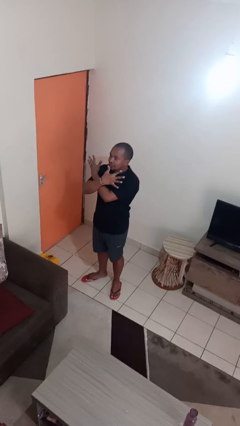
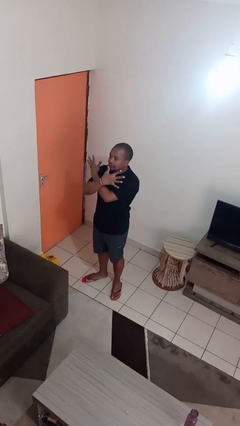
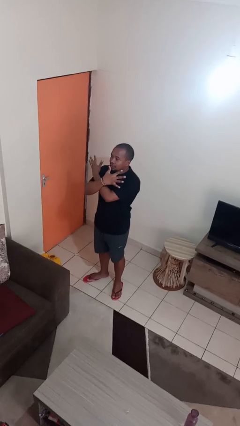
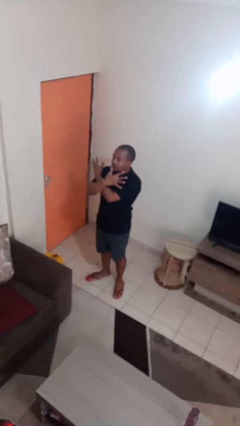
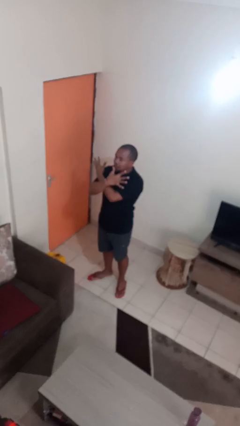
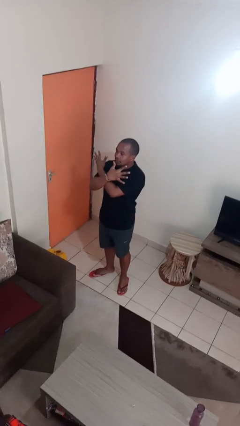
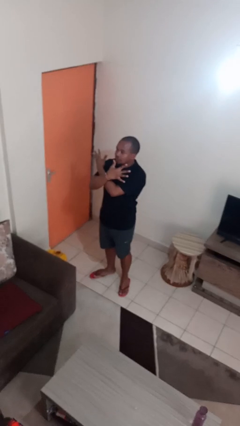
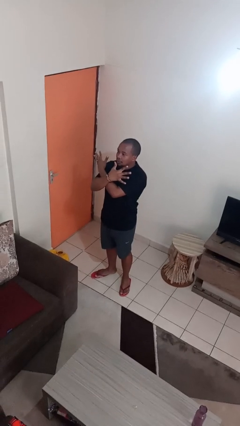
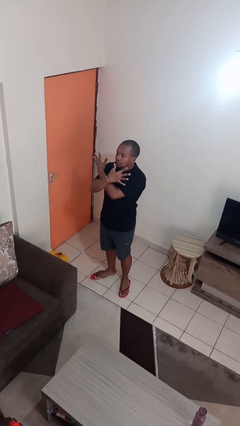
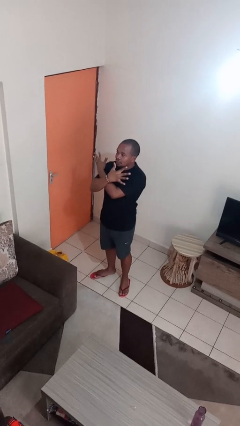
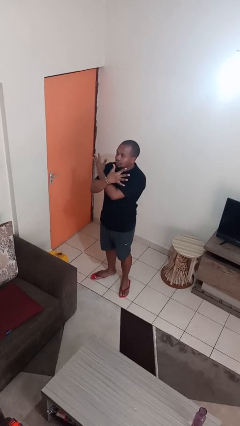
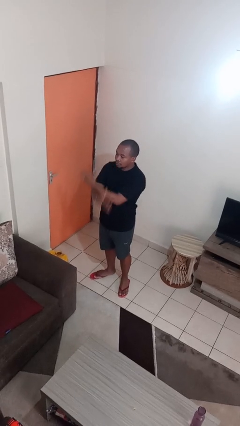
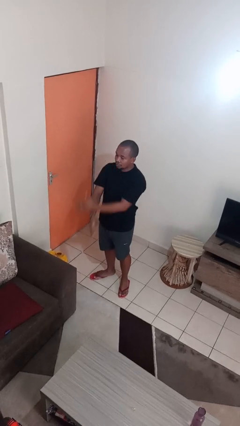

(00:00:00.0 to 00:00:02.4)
person gestures arms x

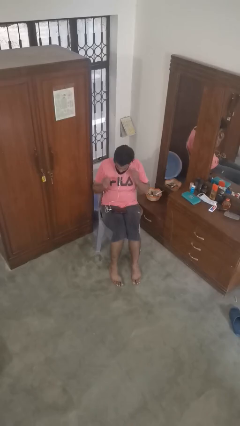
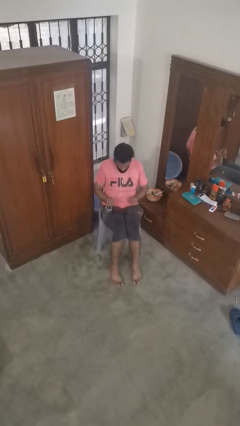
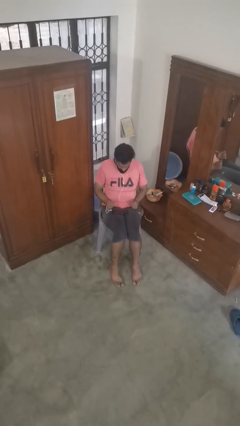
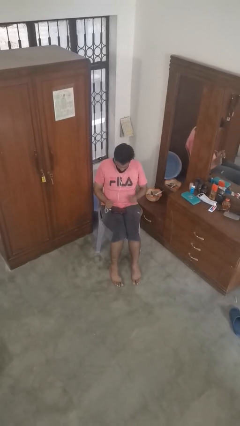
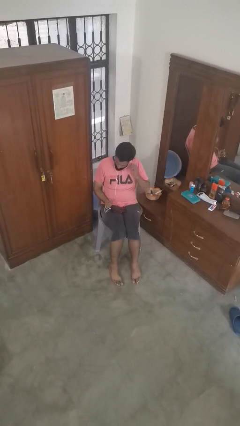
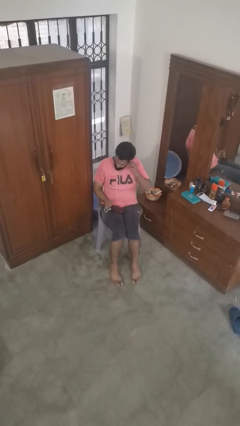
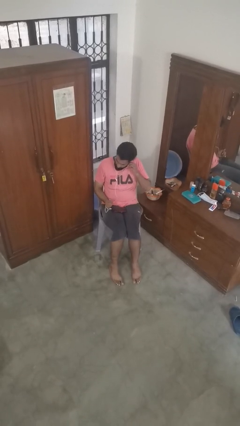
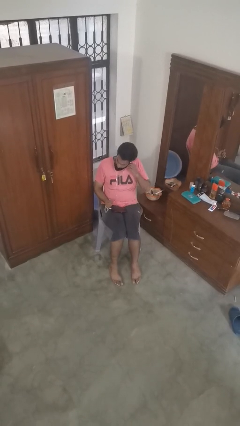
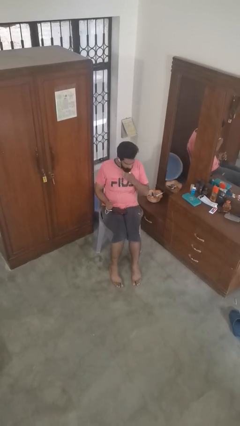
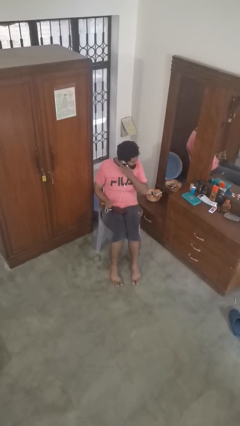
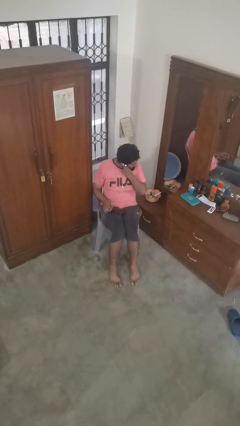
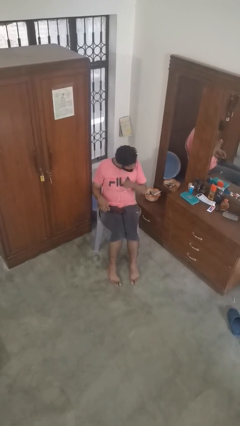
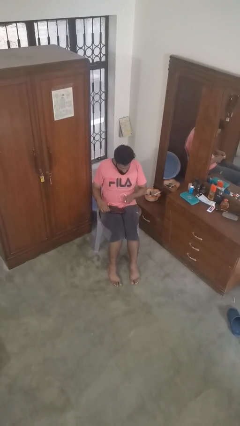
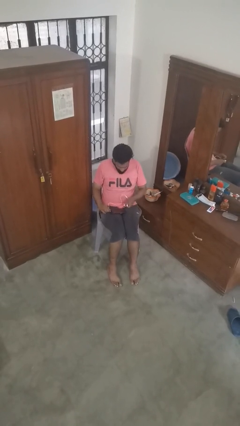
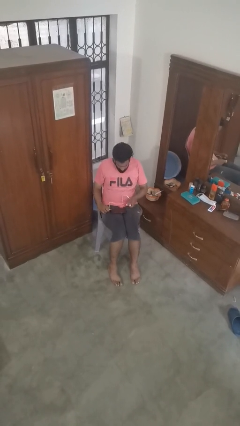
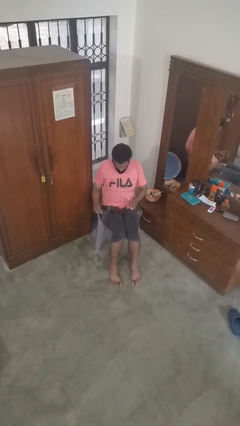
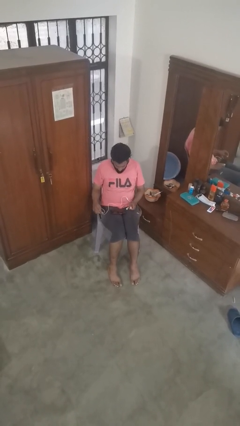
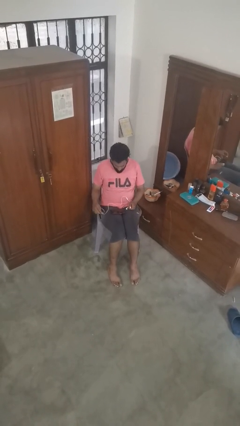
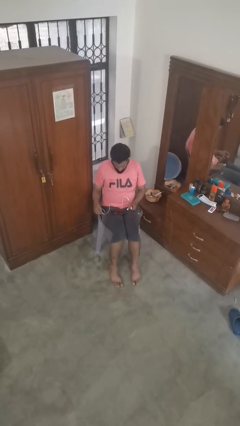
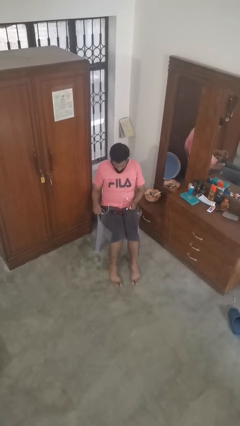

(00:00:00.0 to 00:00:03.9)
person takes off headphones

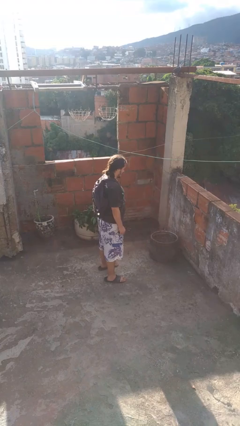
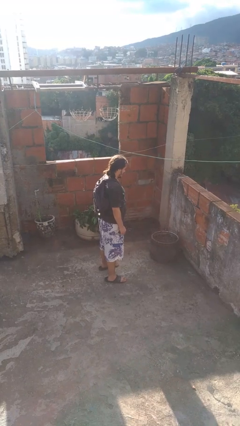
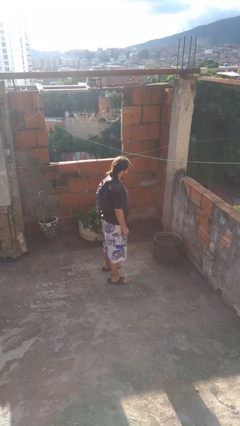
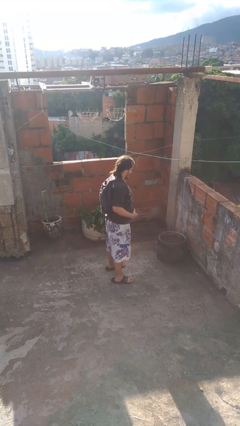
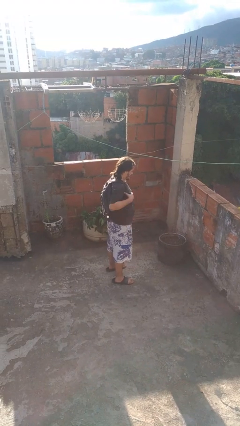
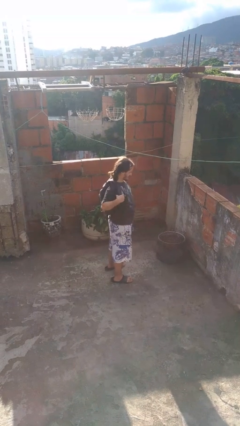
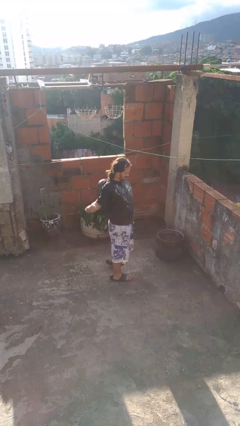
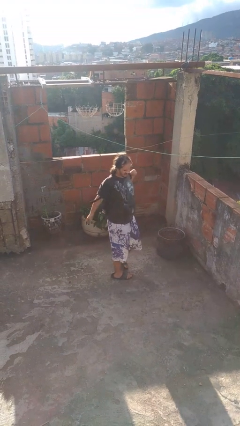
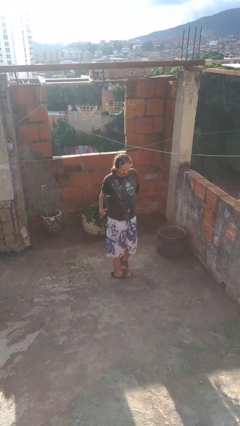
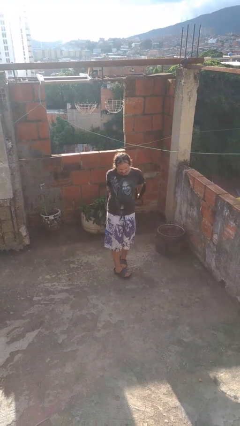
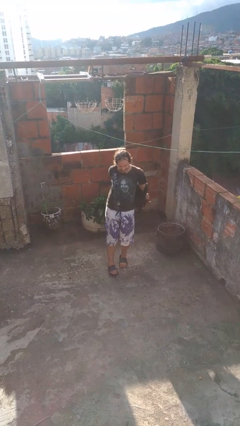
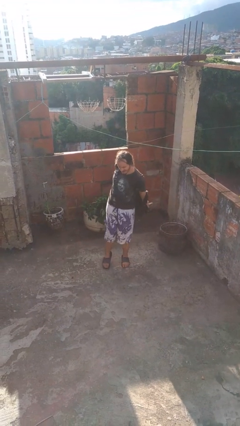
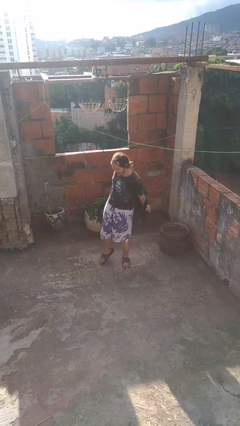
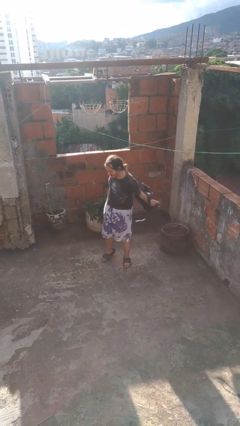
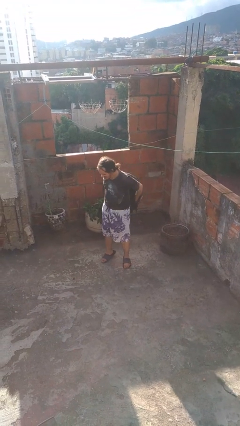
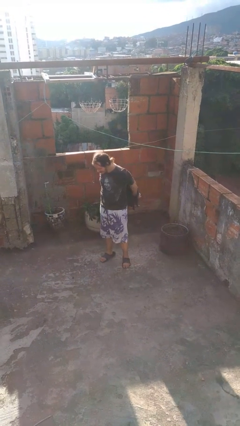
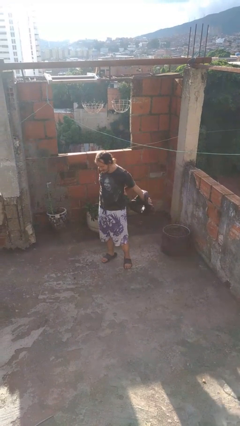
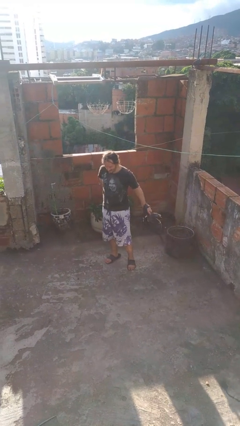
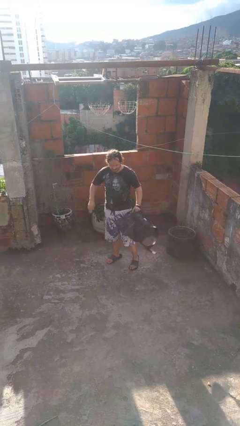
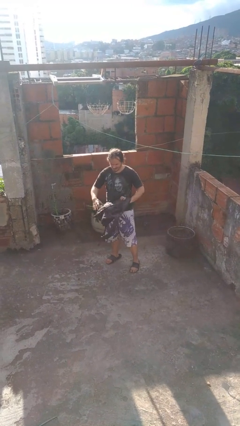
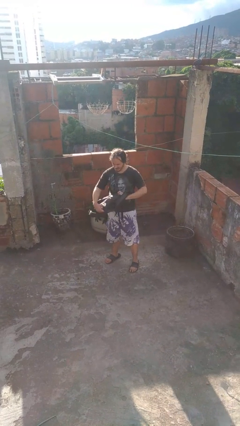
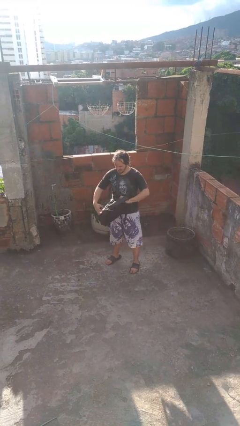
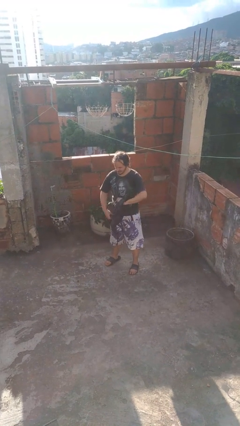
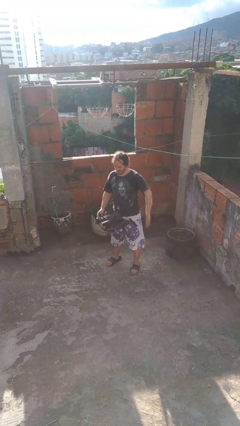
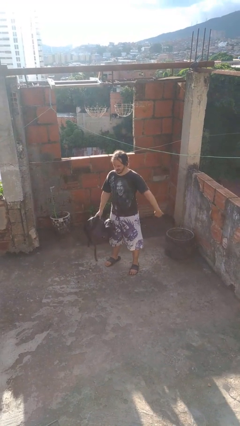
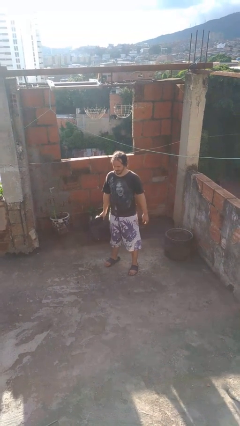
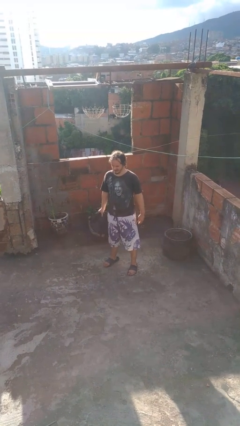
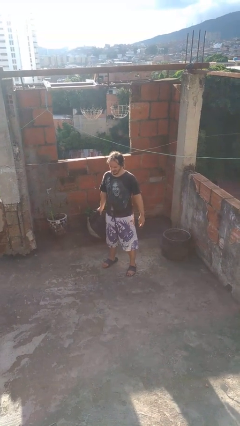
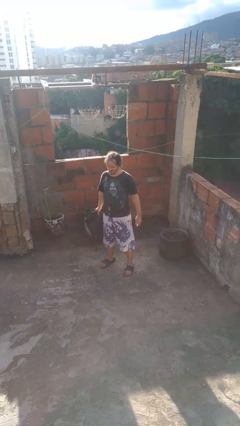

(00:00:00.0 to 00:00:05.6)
person takes off backpack

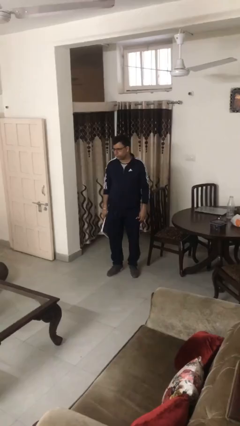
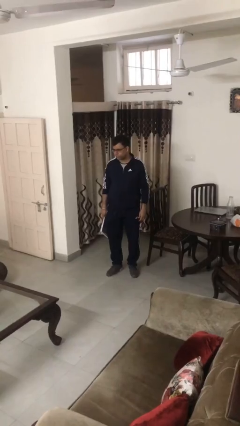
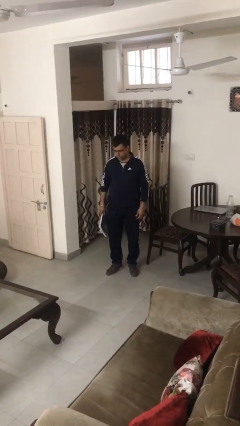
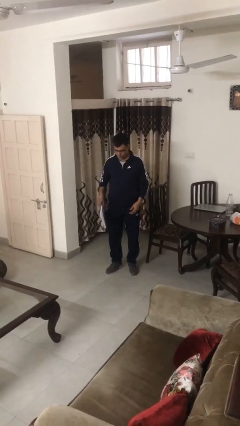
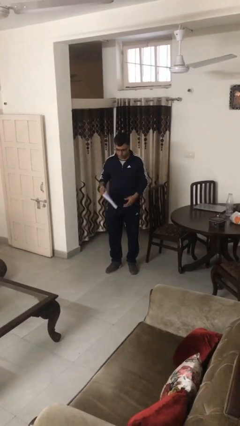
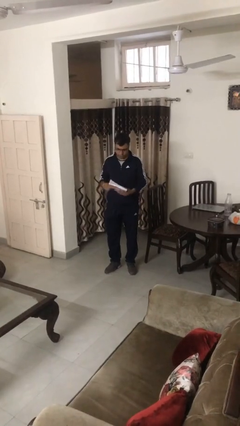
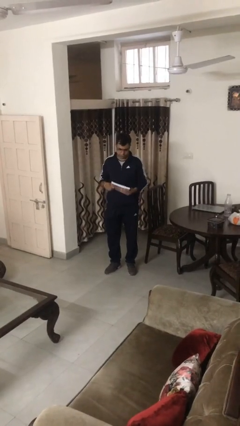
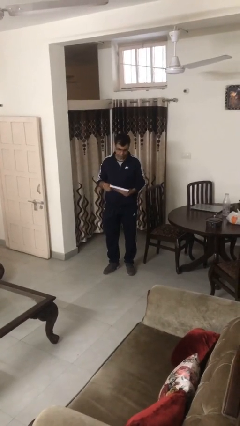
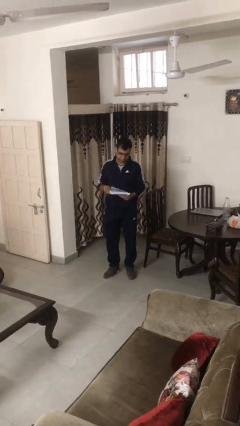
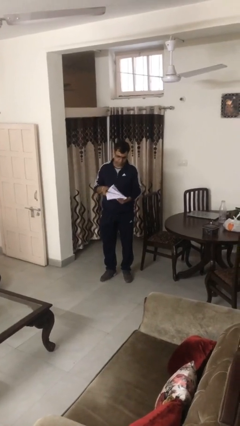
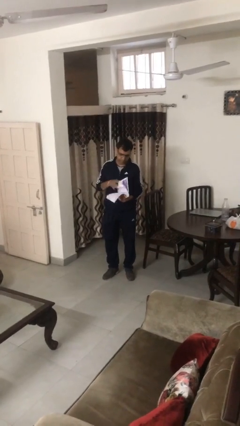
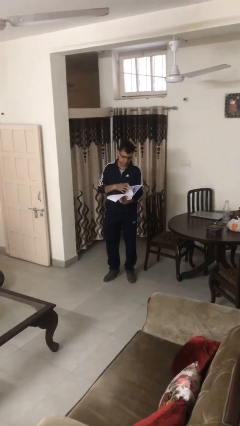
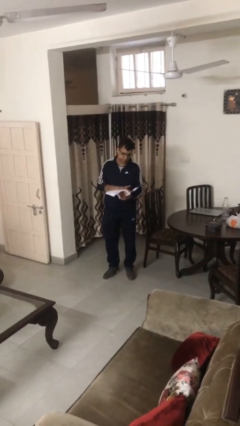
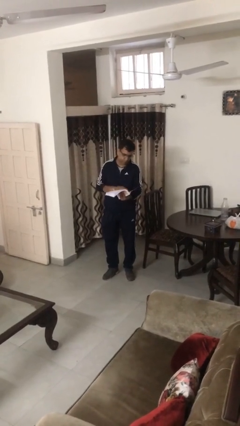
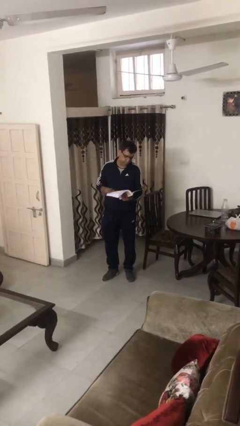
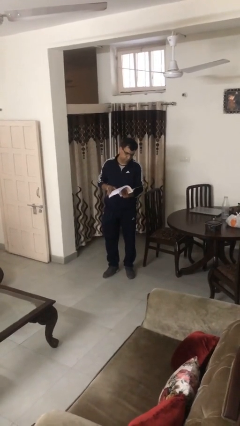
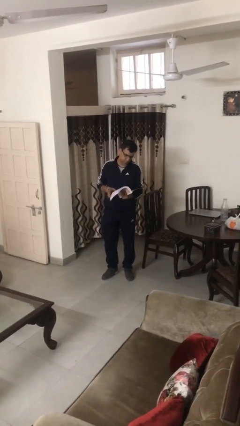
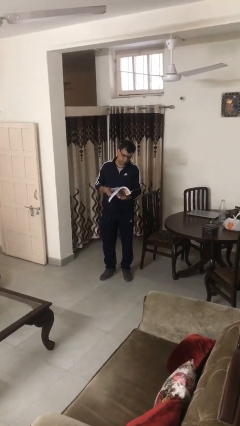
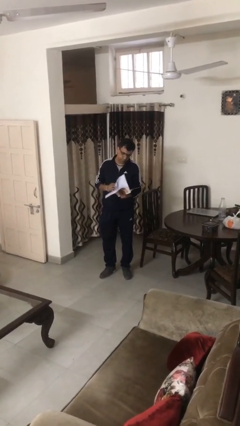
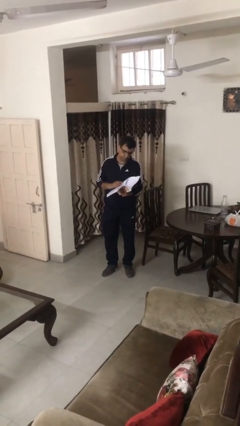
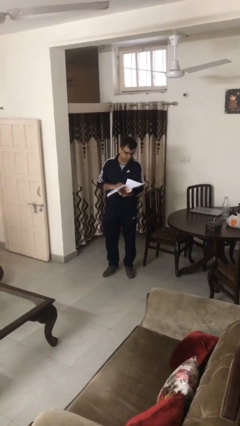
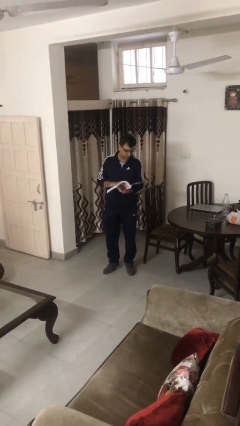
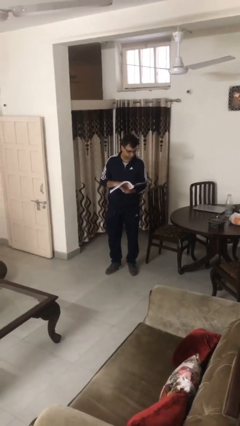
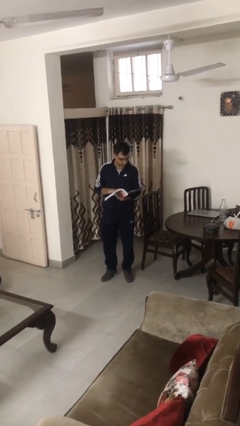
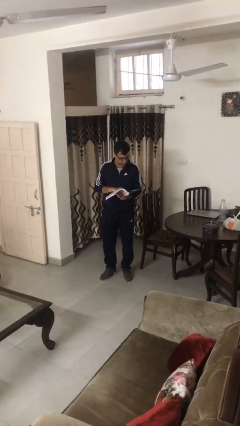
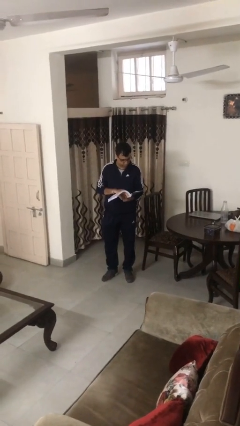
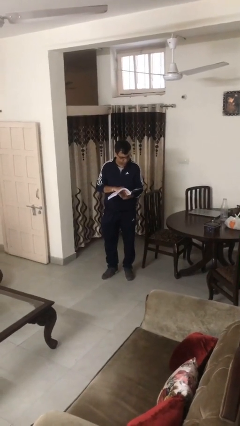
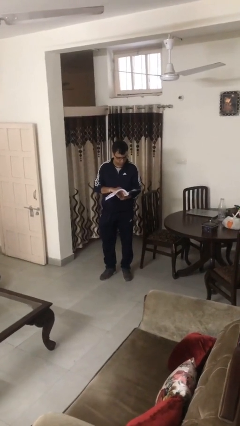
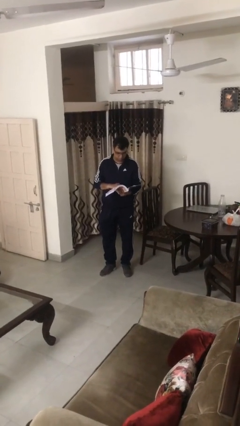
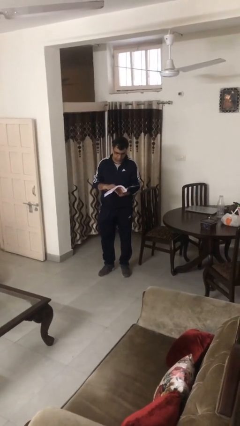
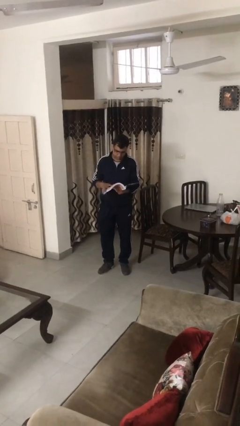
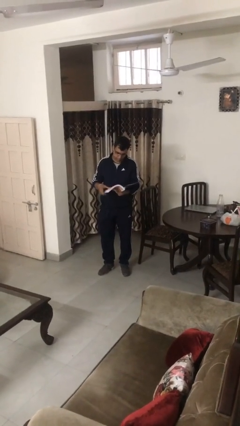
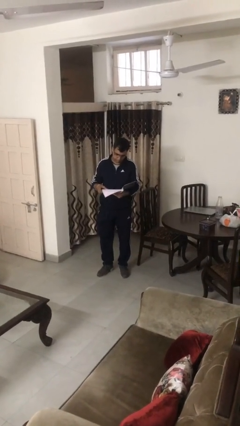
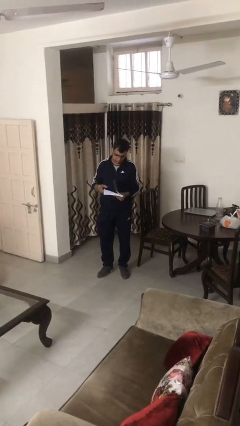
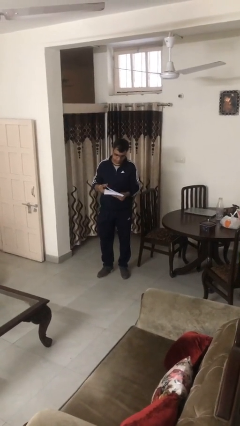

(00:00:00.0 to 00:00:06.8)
person reads document
